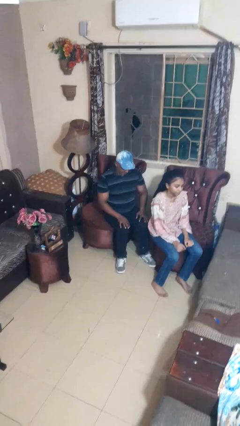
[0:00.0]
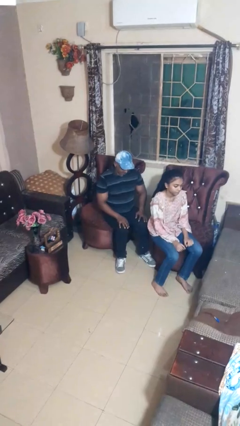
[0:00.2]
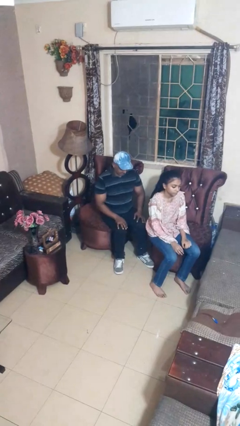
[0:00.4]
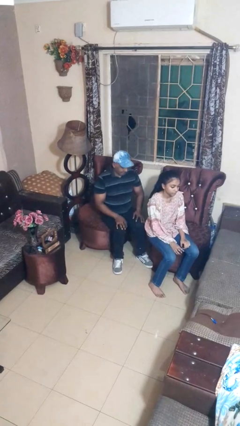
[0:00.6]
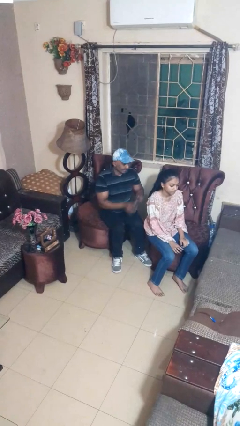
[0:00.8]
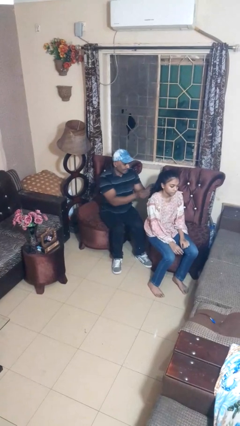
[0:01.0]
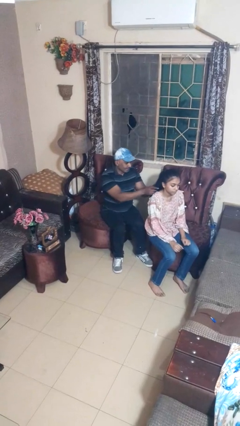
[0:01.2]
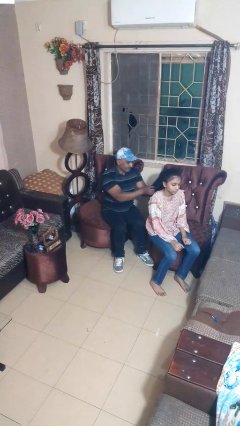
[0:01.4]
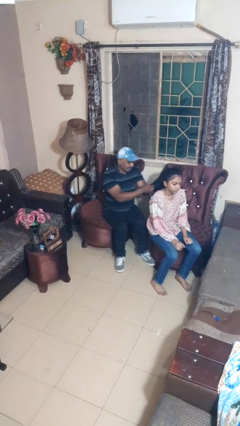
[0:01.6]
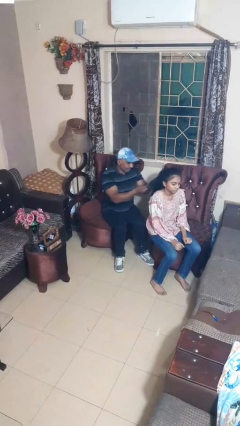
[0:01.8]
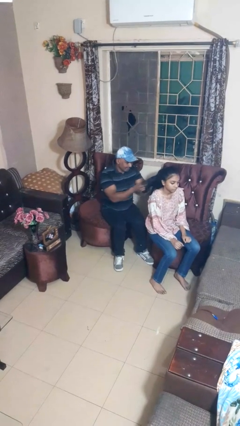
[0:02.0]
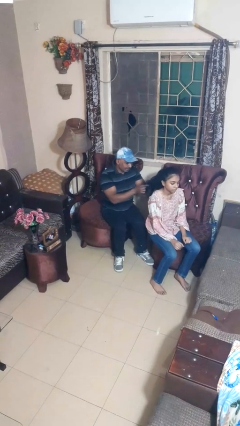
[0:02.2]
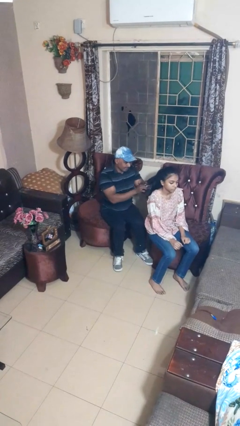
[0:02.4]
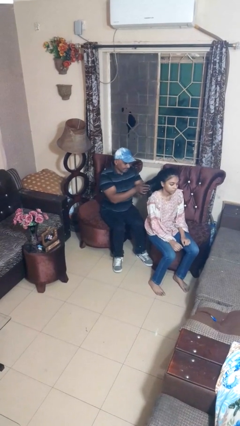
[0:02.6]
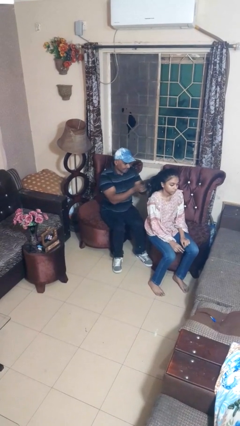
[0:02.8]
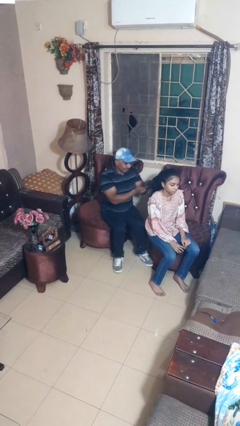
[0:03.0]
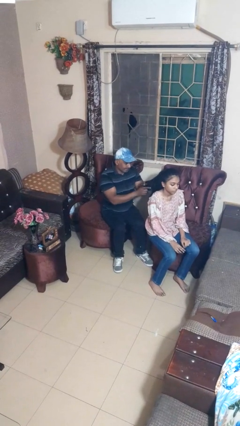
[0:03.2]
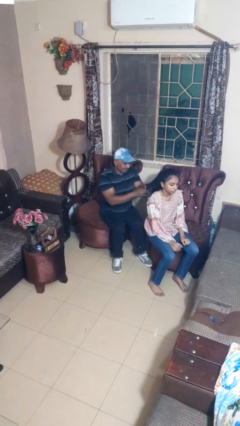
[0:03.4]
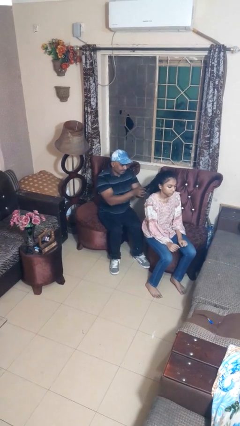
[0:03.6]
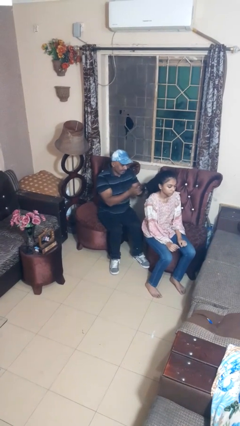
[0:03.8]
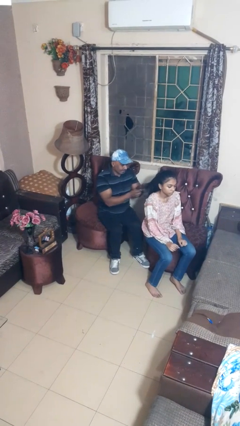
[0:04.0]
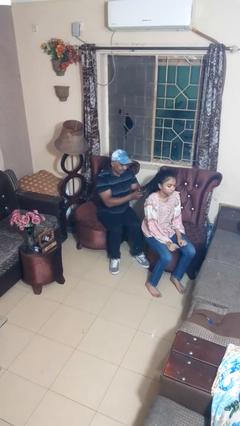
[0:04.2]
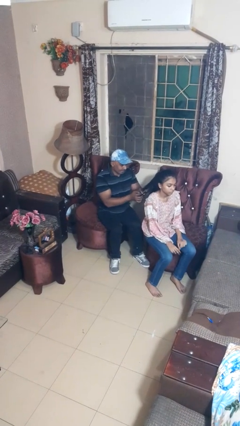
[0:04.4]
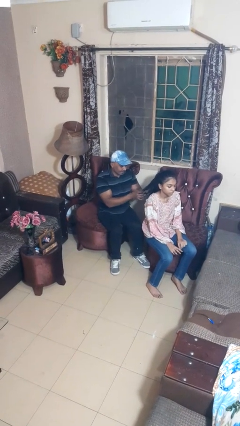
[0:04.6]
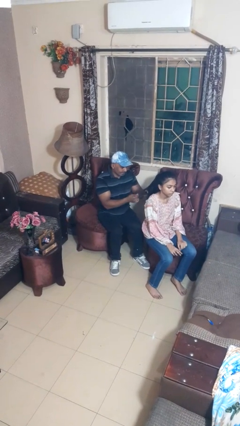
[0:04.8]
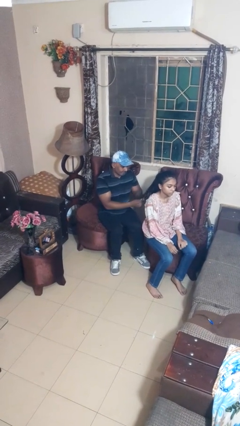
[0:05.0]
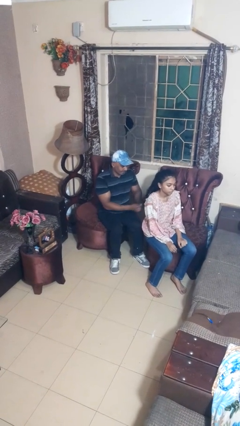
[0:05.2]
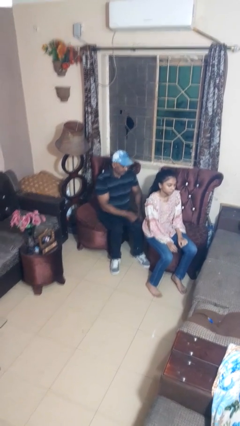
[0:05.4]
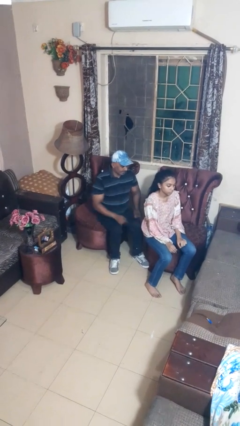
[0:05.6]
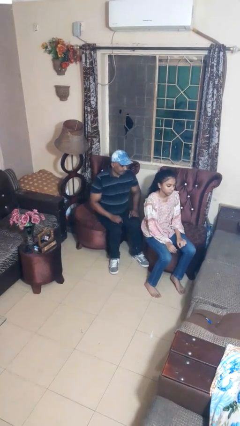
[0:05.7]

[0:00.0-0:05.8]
person braids hair of person

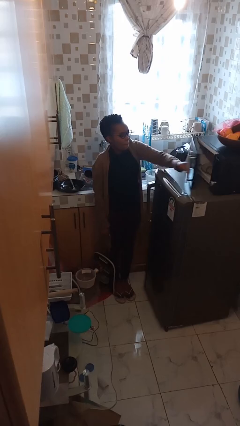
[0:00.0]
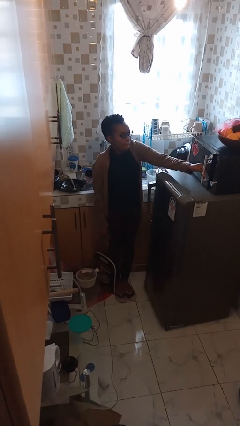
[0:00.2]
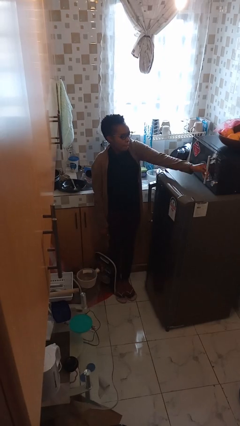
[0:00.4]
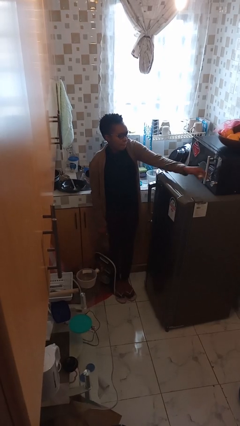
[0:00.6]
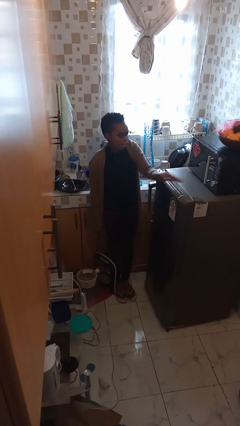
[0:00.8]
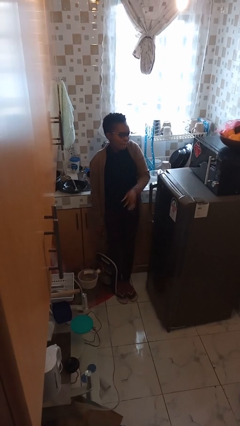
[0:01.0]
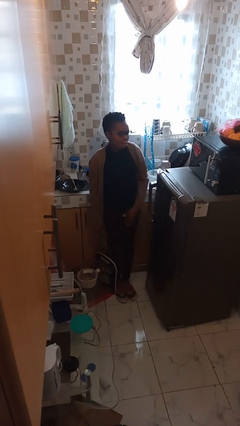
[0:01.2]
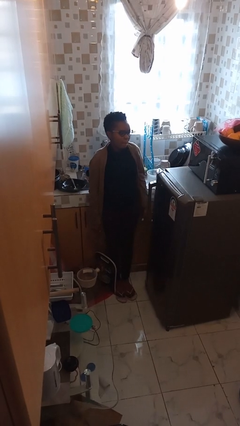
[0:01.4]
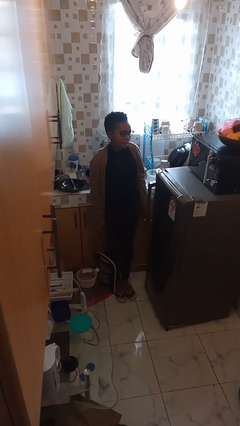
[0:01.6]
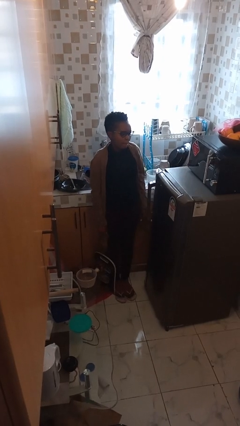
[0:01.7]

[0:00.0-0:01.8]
person closes microwave

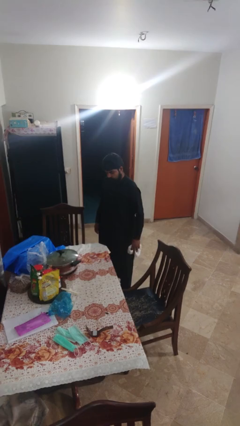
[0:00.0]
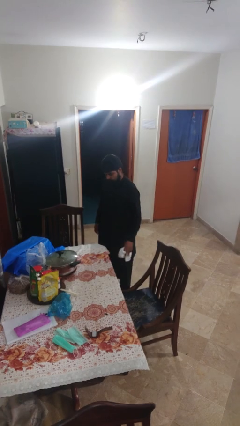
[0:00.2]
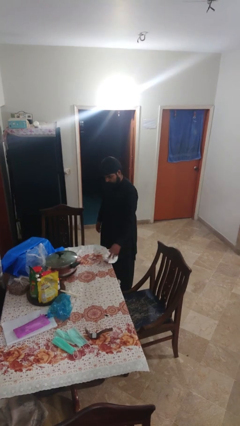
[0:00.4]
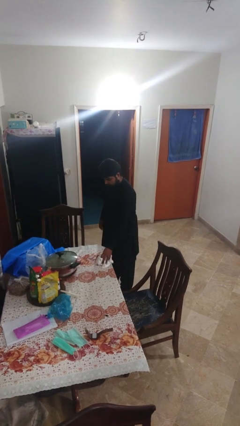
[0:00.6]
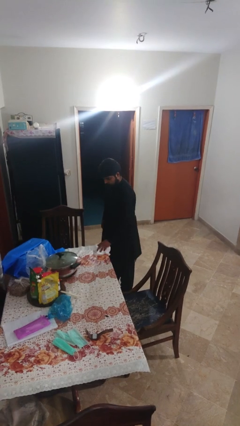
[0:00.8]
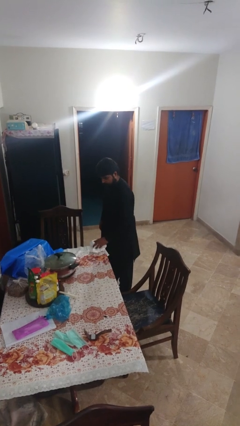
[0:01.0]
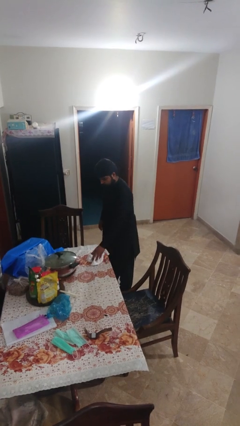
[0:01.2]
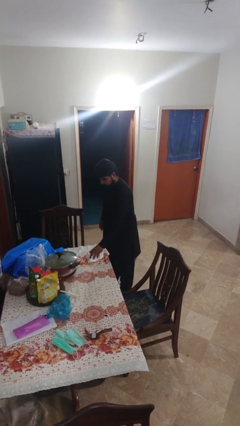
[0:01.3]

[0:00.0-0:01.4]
person cleans table with rag

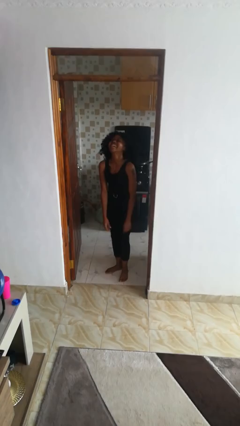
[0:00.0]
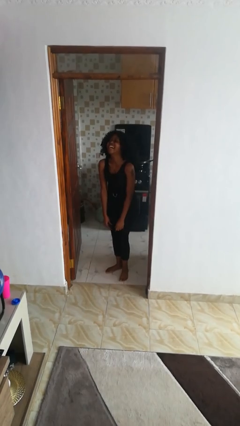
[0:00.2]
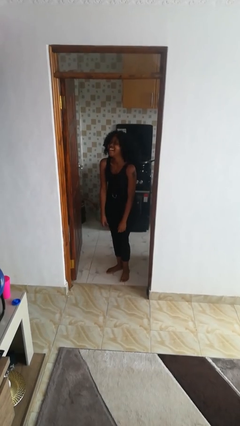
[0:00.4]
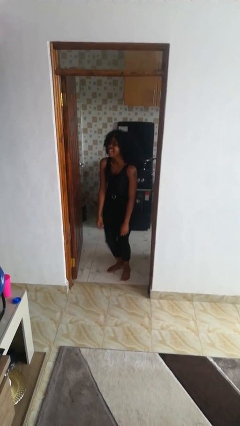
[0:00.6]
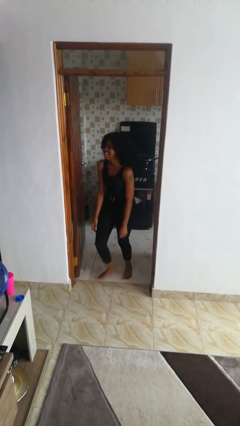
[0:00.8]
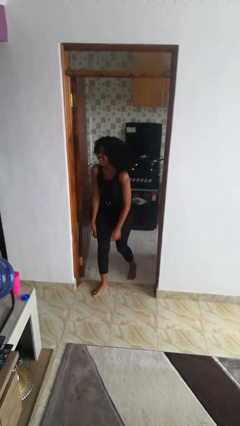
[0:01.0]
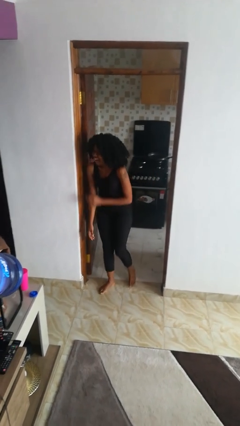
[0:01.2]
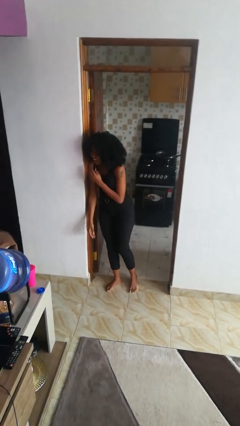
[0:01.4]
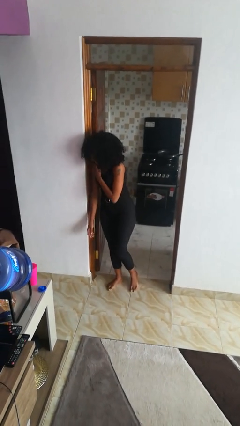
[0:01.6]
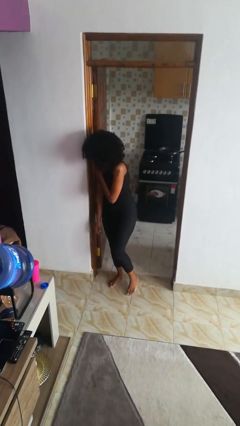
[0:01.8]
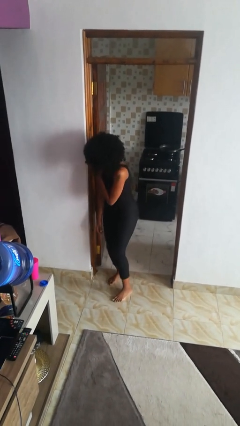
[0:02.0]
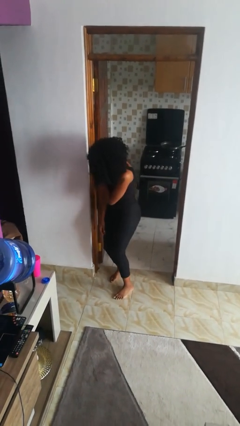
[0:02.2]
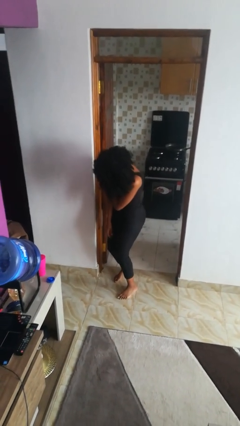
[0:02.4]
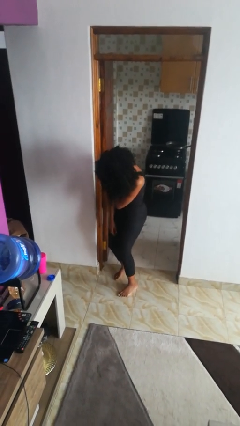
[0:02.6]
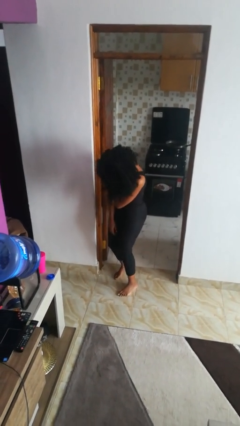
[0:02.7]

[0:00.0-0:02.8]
person bumps into wall

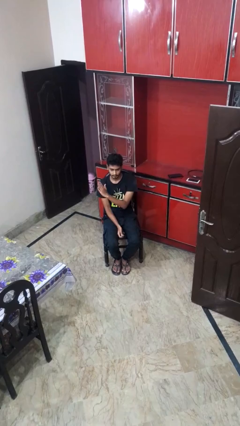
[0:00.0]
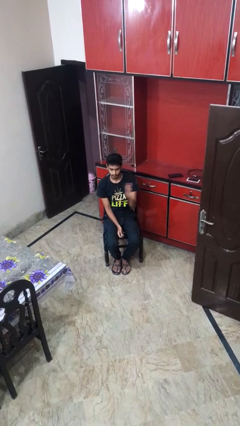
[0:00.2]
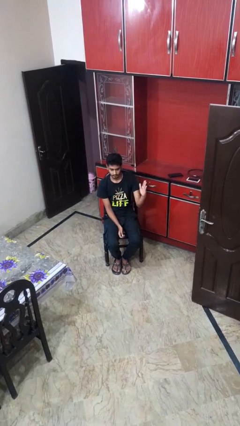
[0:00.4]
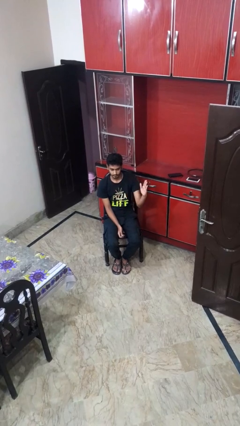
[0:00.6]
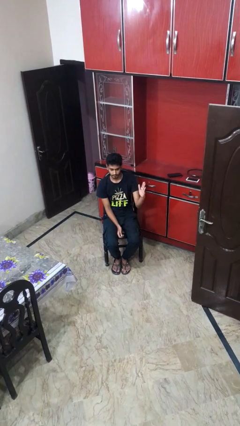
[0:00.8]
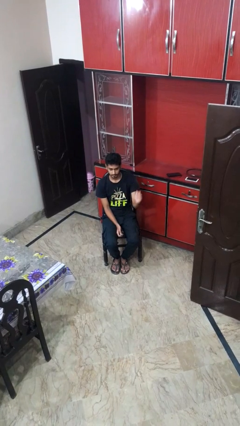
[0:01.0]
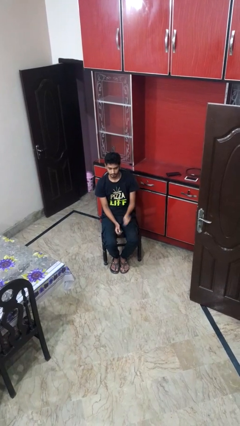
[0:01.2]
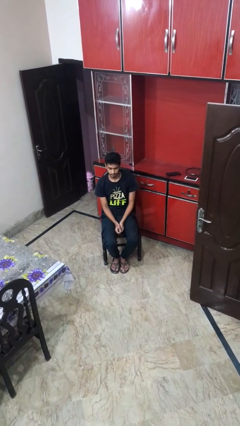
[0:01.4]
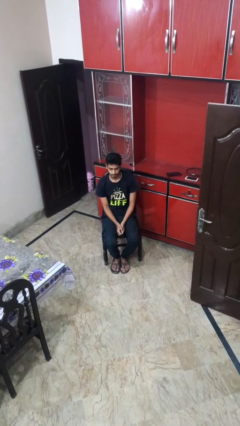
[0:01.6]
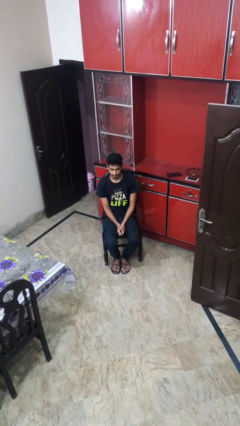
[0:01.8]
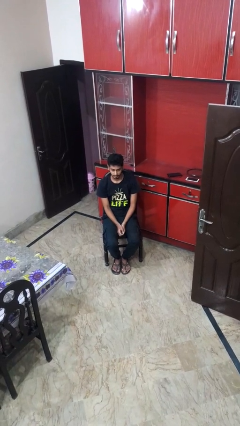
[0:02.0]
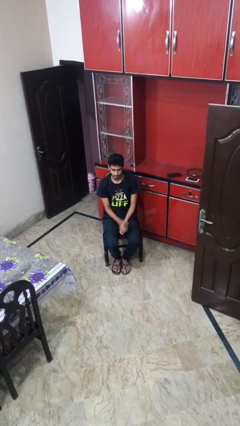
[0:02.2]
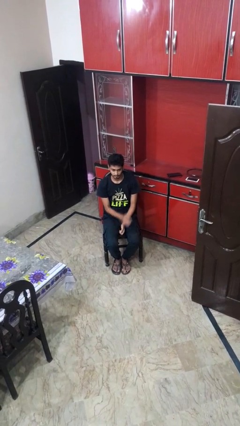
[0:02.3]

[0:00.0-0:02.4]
person gestures swipe left

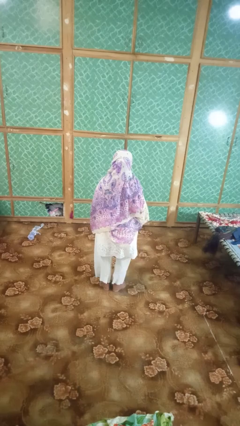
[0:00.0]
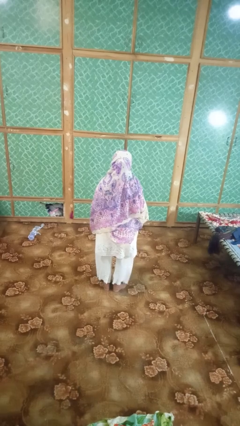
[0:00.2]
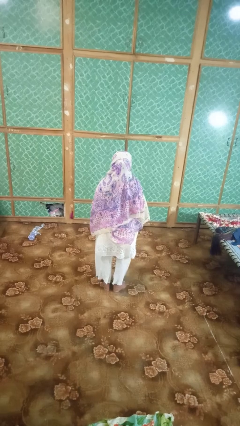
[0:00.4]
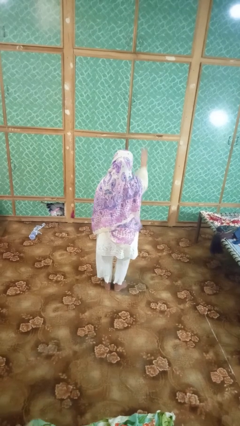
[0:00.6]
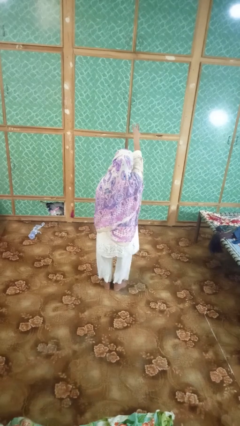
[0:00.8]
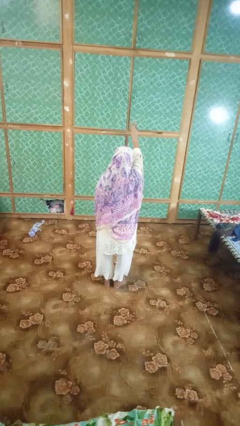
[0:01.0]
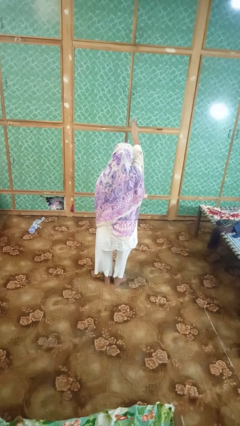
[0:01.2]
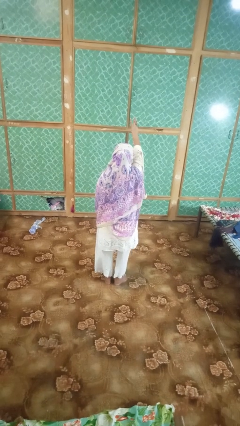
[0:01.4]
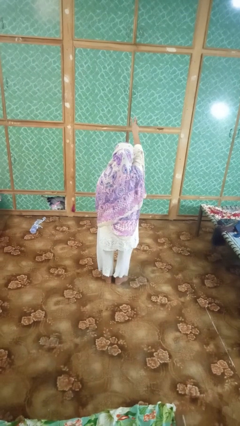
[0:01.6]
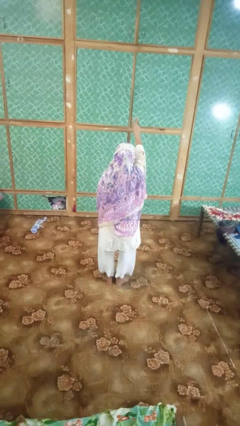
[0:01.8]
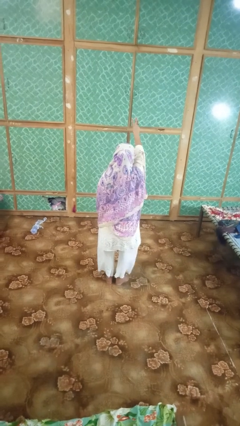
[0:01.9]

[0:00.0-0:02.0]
person gestures number three

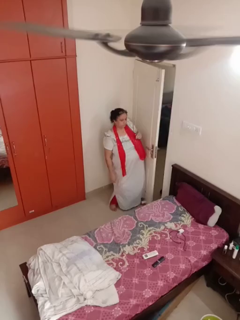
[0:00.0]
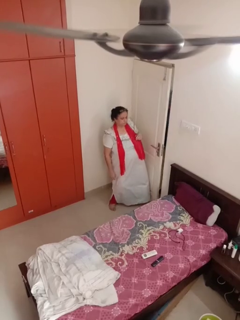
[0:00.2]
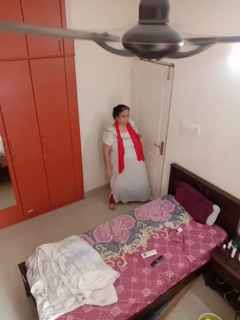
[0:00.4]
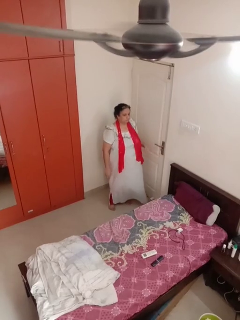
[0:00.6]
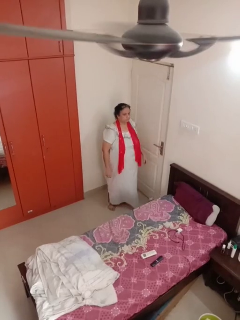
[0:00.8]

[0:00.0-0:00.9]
person closes door with hip

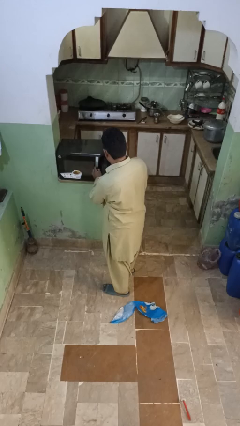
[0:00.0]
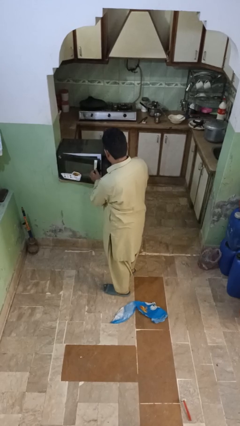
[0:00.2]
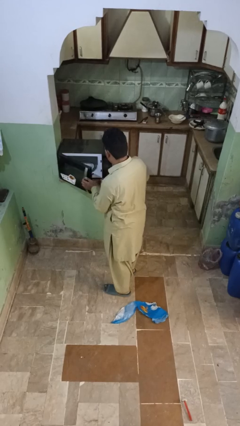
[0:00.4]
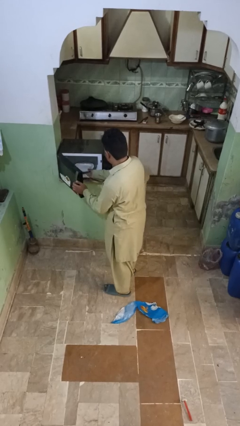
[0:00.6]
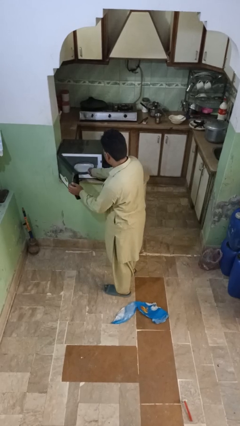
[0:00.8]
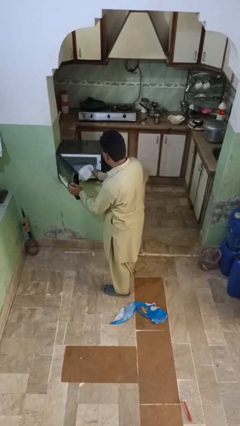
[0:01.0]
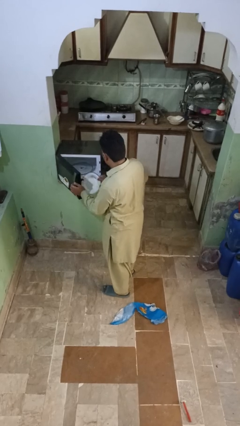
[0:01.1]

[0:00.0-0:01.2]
person takes object from microwave
